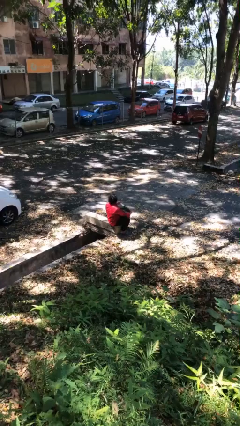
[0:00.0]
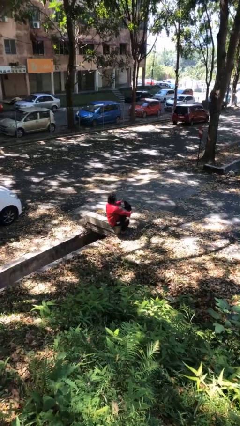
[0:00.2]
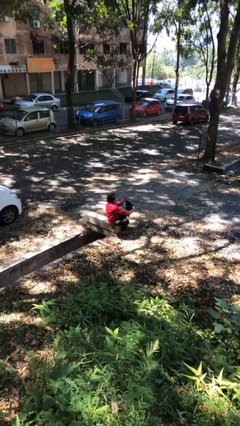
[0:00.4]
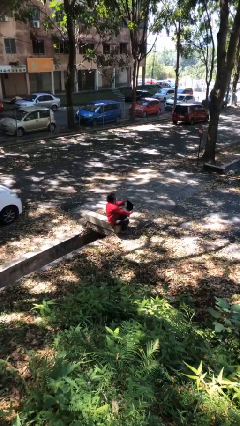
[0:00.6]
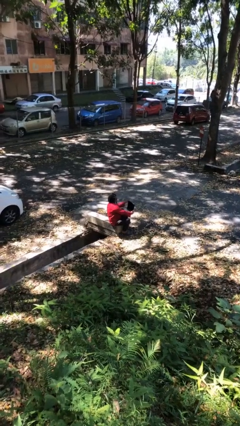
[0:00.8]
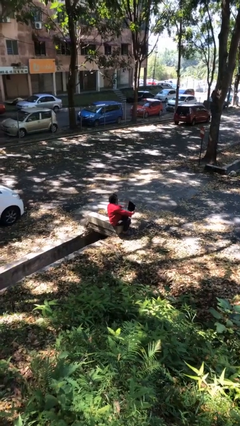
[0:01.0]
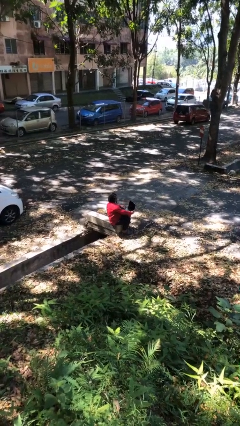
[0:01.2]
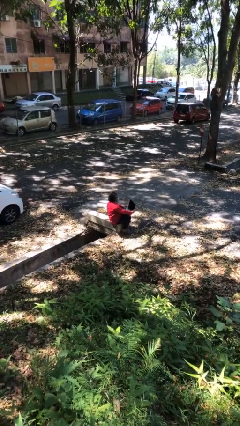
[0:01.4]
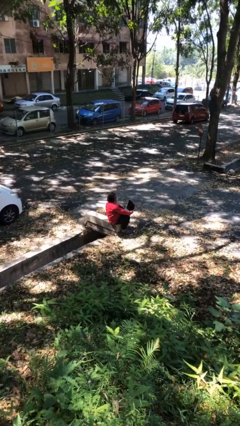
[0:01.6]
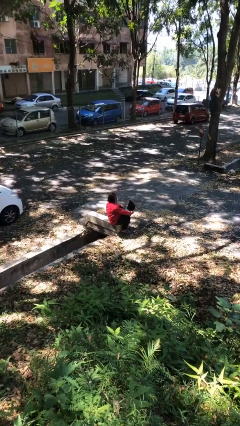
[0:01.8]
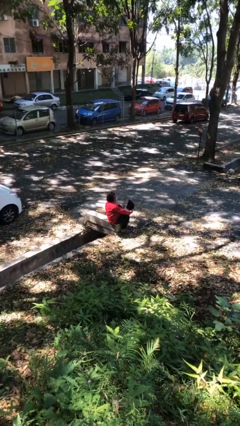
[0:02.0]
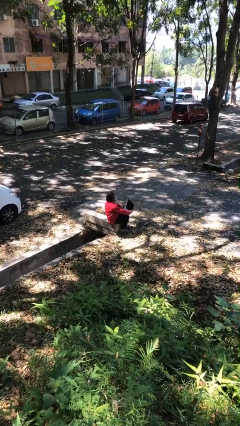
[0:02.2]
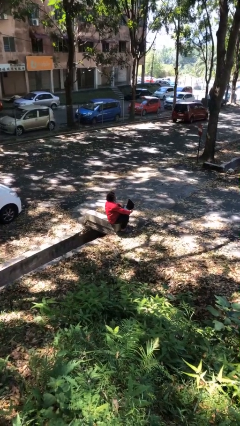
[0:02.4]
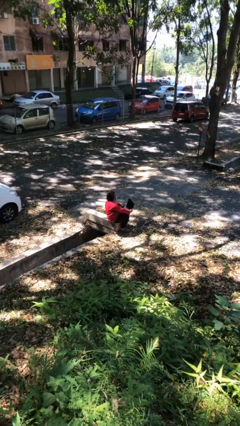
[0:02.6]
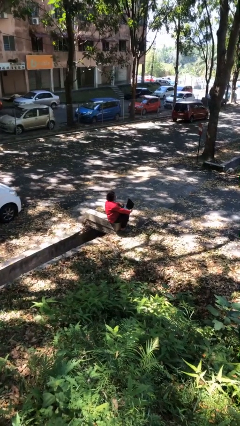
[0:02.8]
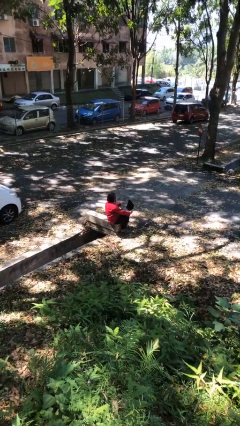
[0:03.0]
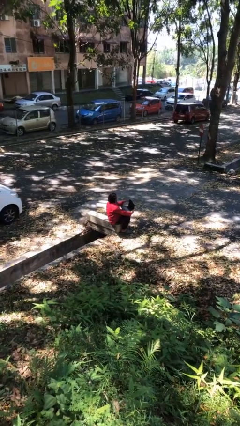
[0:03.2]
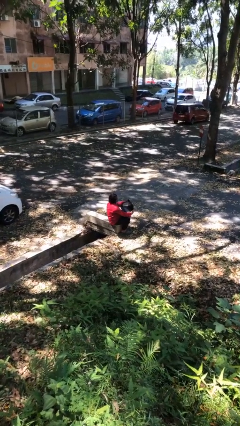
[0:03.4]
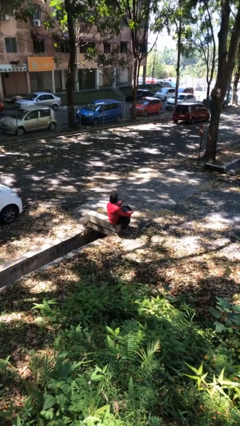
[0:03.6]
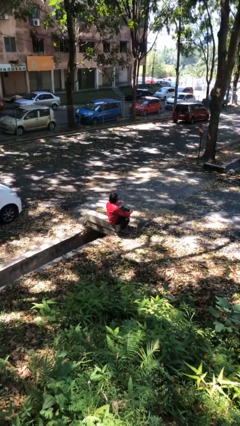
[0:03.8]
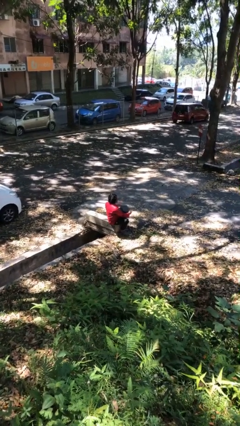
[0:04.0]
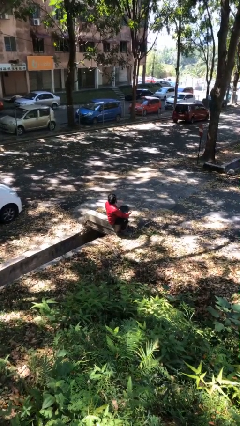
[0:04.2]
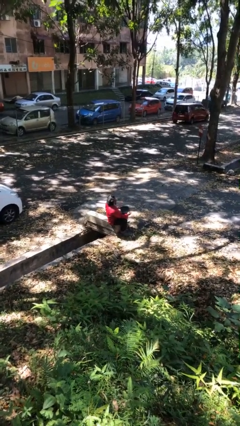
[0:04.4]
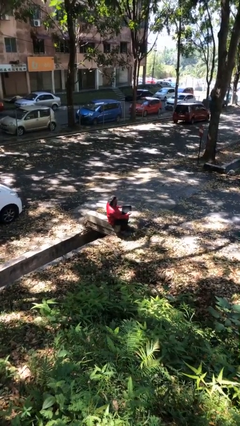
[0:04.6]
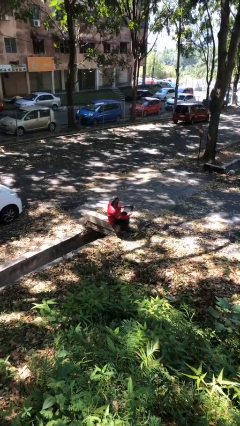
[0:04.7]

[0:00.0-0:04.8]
person interacts with laptop

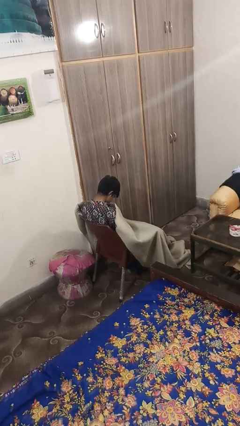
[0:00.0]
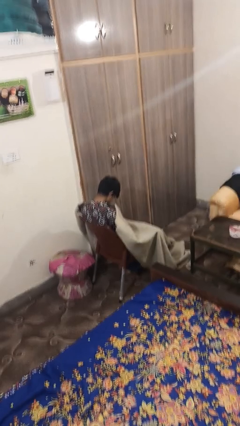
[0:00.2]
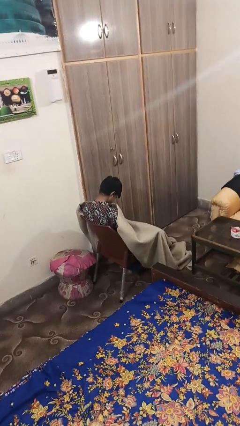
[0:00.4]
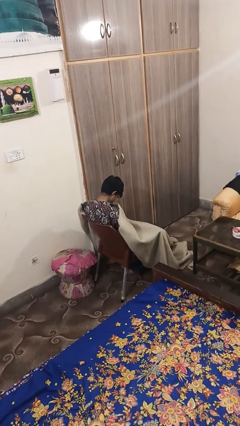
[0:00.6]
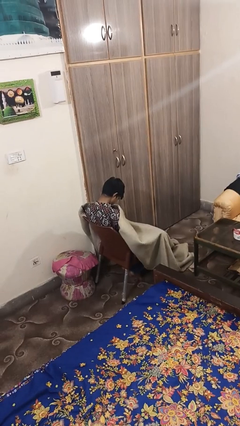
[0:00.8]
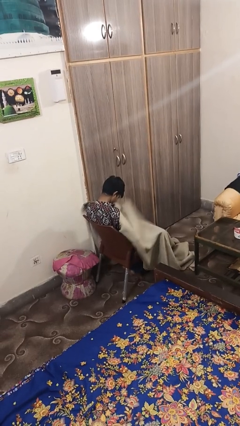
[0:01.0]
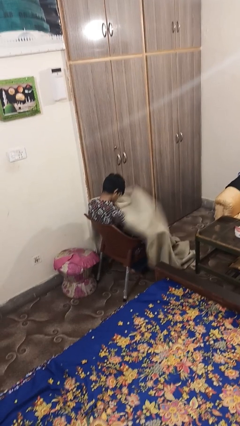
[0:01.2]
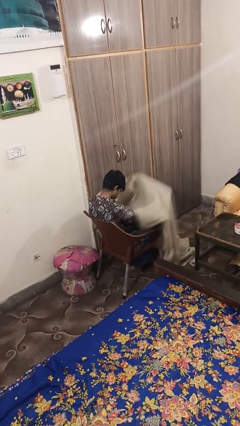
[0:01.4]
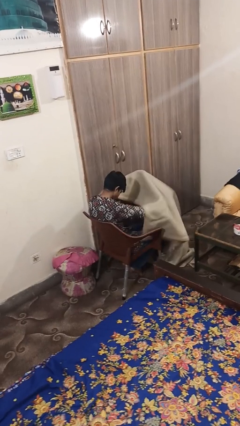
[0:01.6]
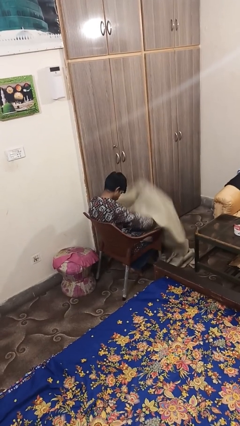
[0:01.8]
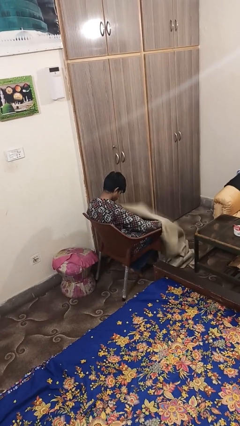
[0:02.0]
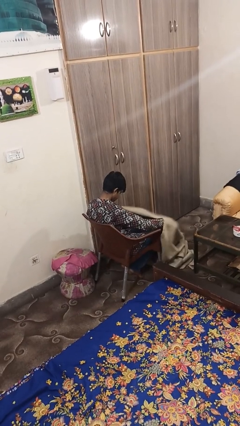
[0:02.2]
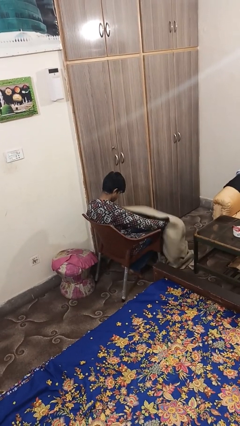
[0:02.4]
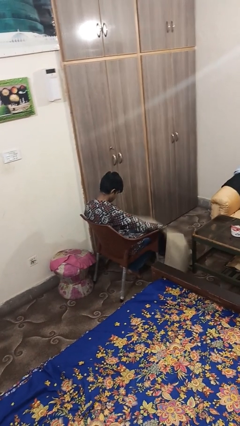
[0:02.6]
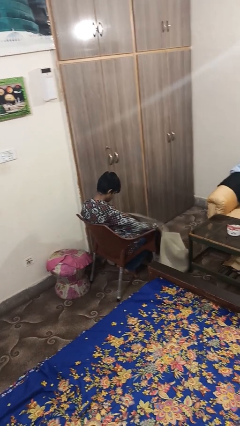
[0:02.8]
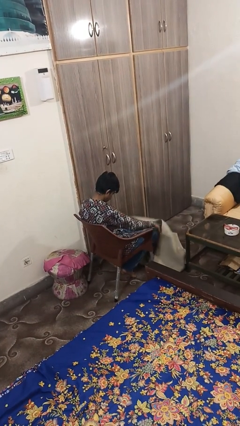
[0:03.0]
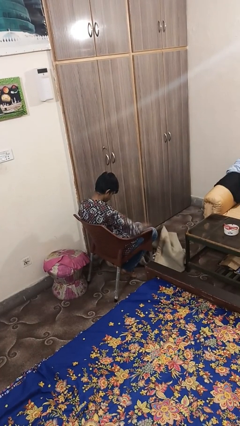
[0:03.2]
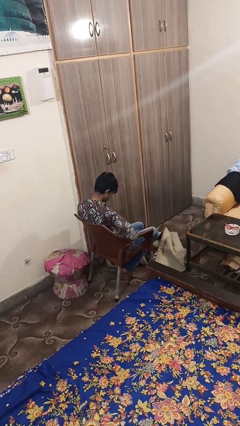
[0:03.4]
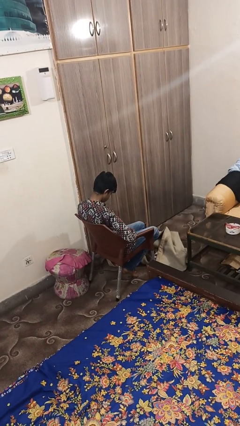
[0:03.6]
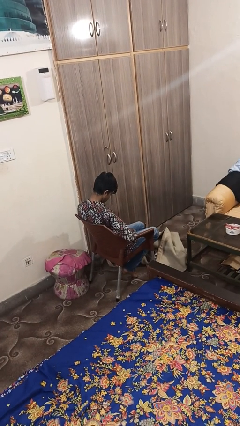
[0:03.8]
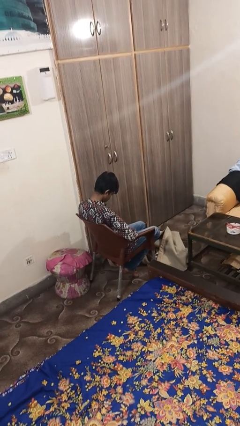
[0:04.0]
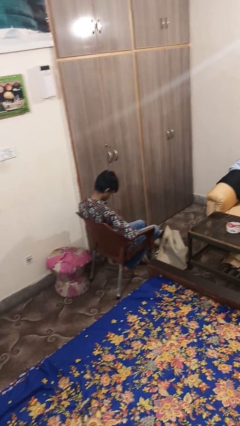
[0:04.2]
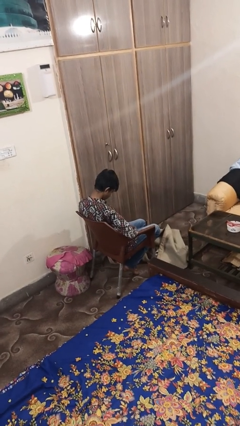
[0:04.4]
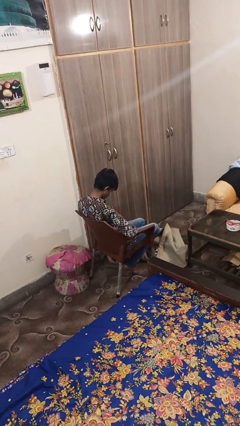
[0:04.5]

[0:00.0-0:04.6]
person uncovers with blanket

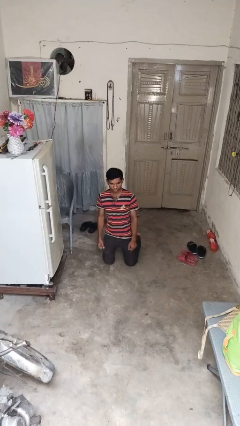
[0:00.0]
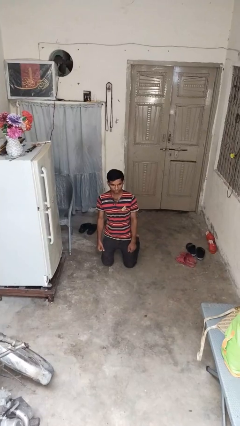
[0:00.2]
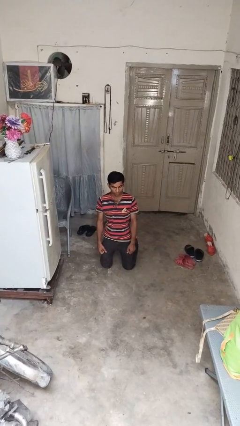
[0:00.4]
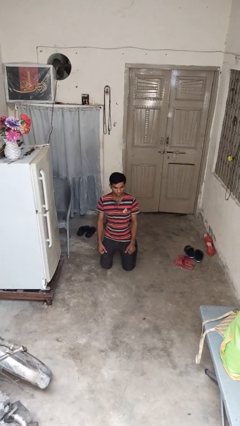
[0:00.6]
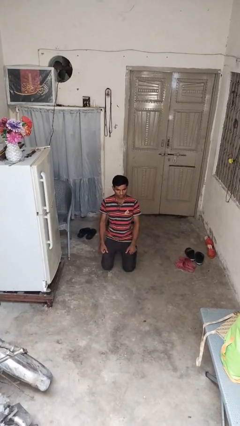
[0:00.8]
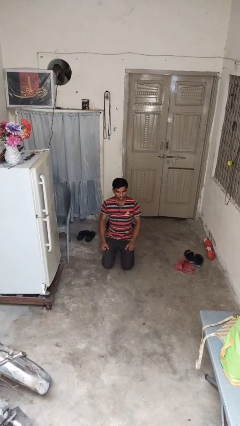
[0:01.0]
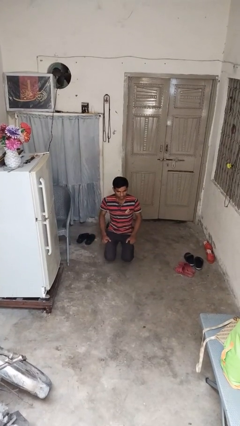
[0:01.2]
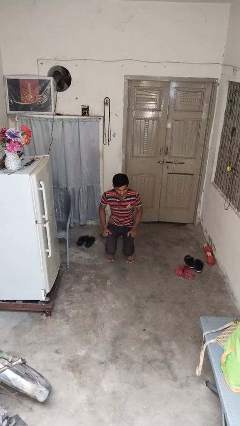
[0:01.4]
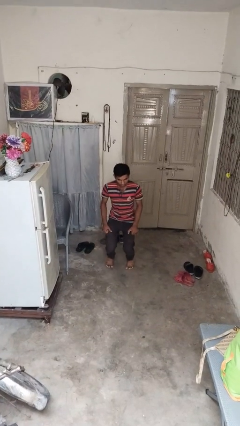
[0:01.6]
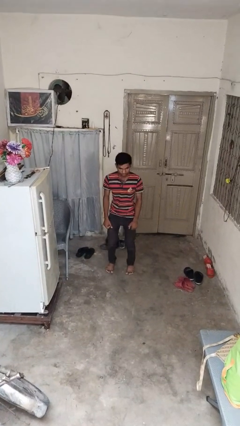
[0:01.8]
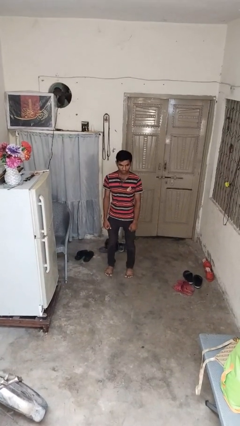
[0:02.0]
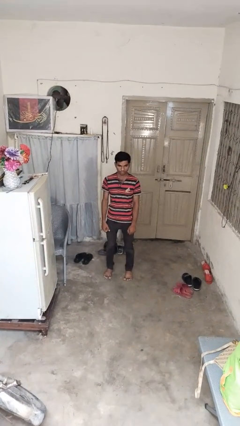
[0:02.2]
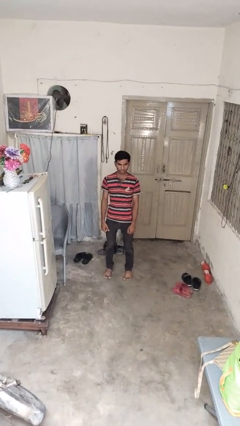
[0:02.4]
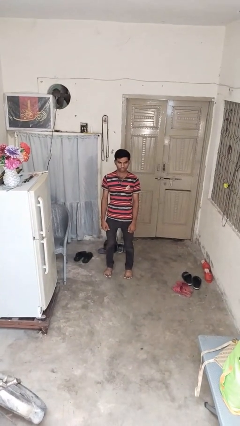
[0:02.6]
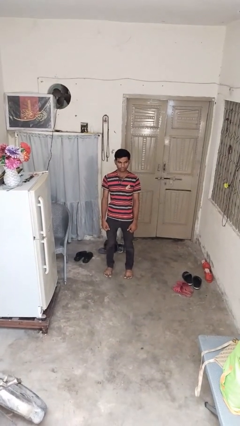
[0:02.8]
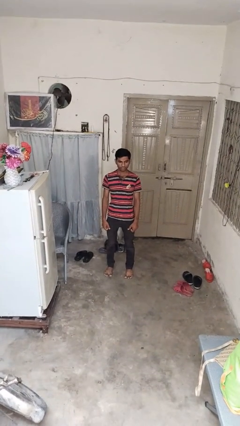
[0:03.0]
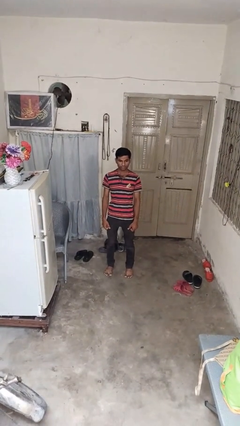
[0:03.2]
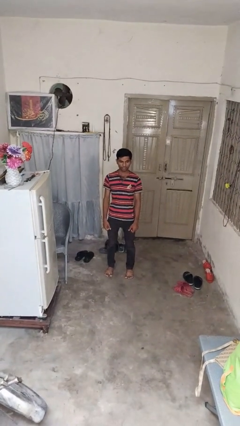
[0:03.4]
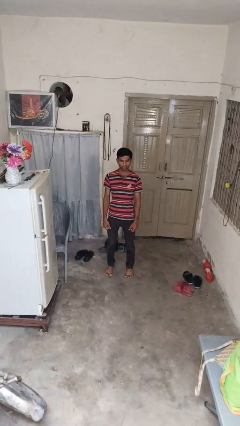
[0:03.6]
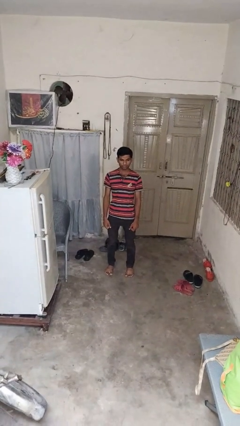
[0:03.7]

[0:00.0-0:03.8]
person stands up from floor

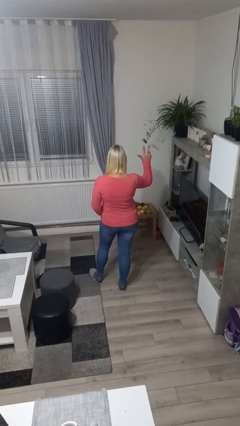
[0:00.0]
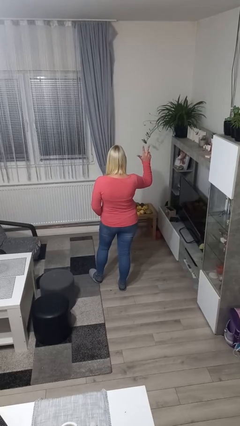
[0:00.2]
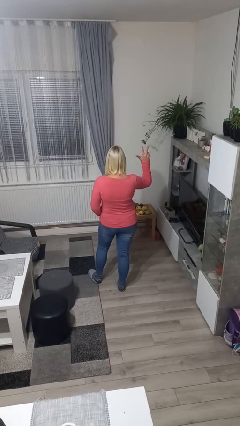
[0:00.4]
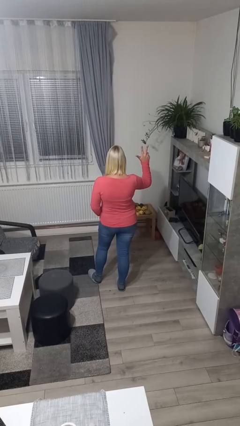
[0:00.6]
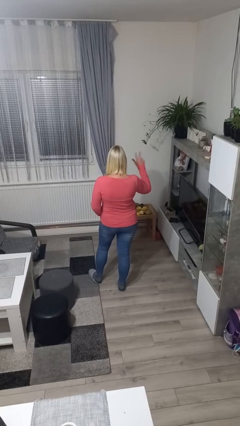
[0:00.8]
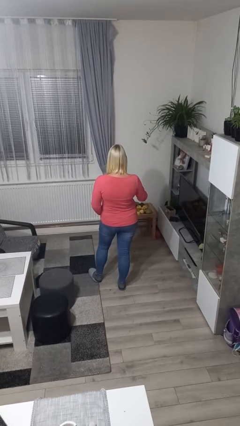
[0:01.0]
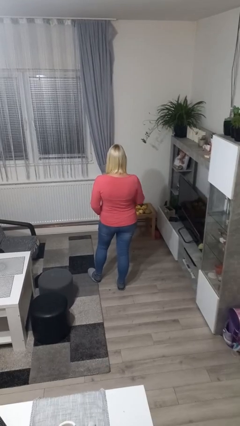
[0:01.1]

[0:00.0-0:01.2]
person gestures number three

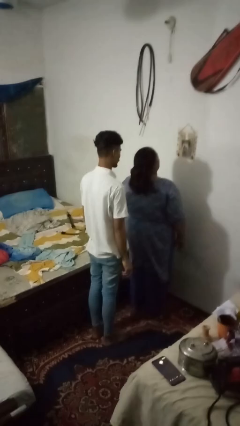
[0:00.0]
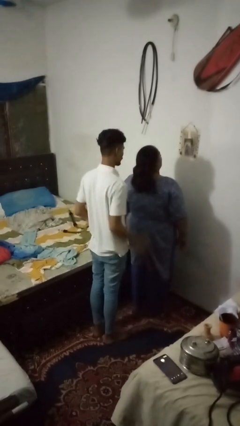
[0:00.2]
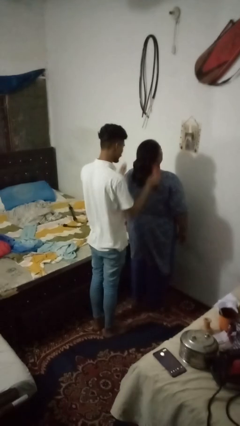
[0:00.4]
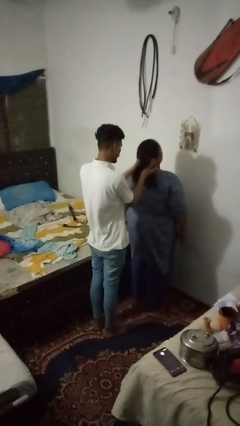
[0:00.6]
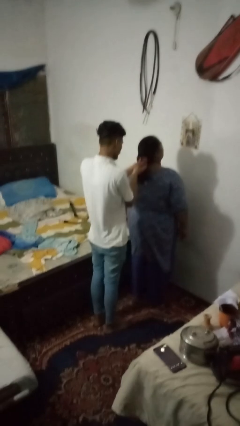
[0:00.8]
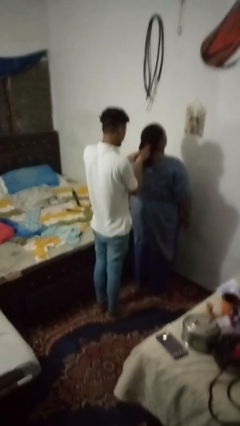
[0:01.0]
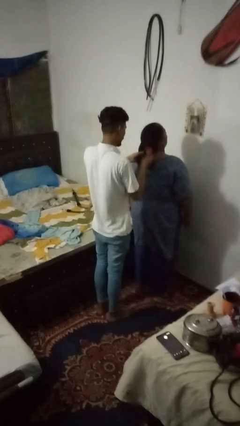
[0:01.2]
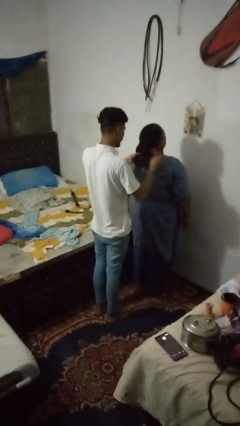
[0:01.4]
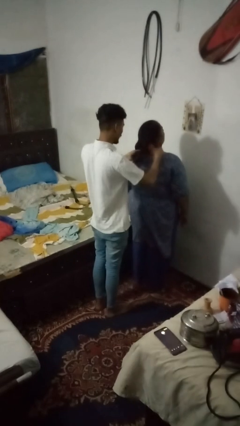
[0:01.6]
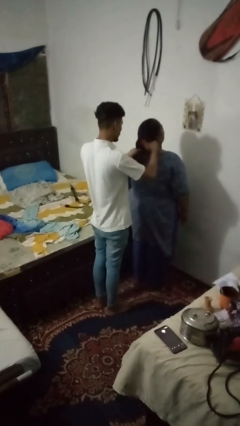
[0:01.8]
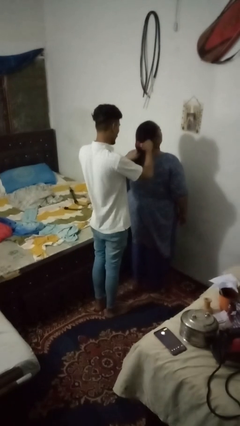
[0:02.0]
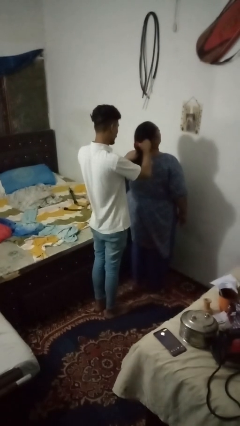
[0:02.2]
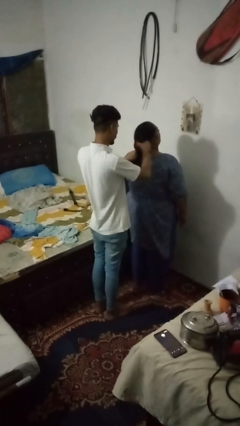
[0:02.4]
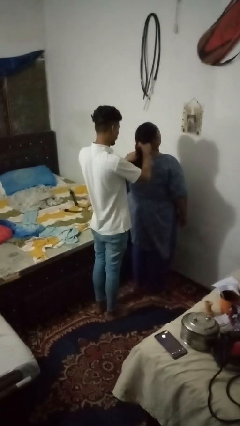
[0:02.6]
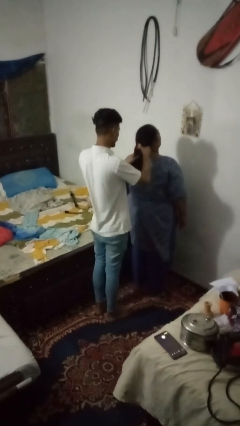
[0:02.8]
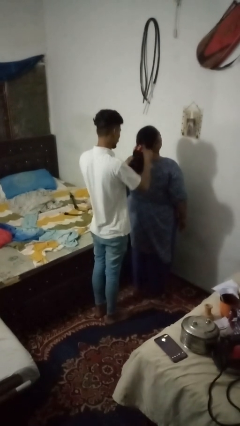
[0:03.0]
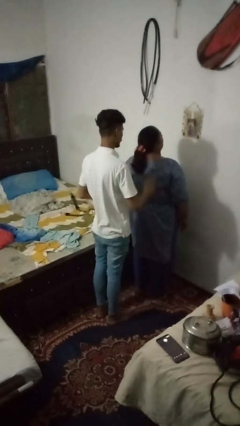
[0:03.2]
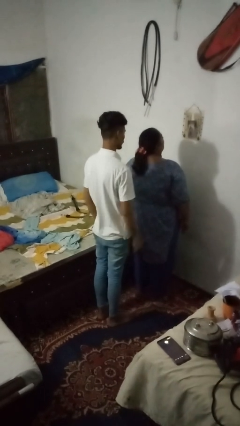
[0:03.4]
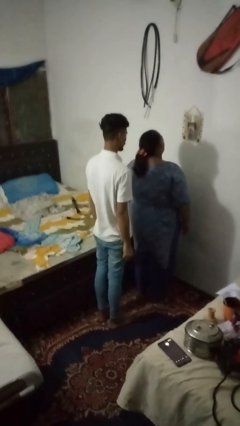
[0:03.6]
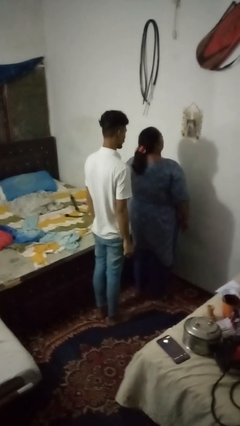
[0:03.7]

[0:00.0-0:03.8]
person braids hair of person
